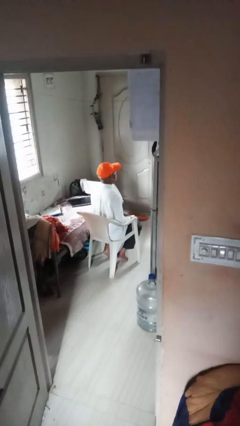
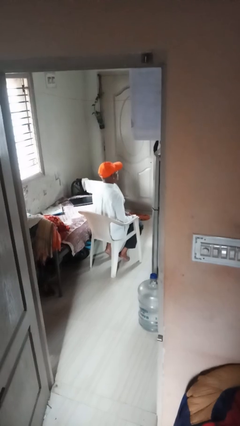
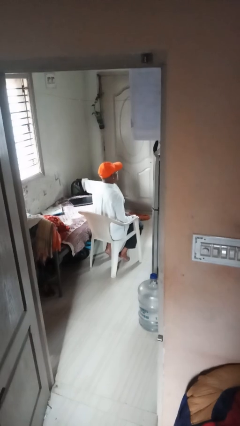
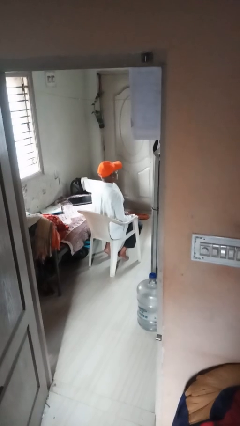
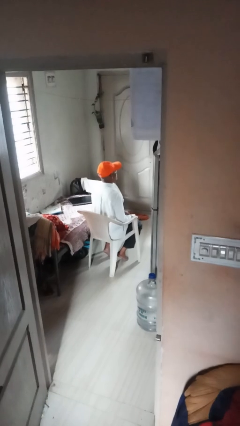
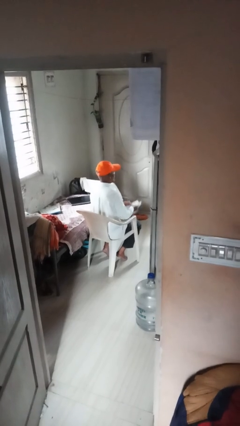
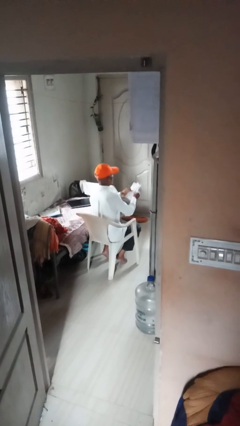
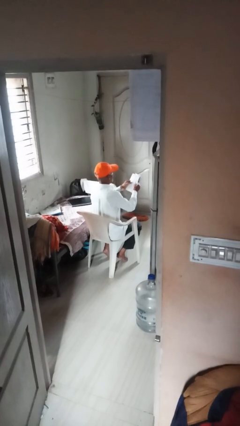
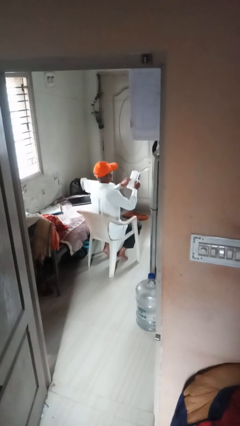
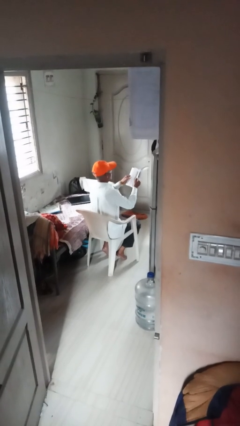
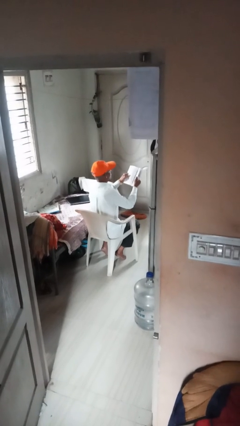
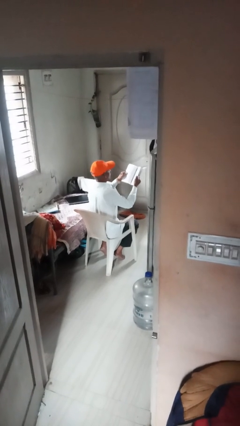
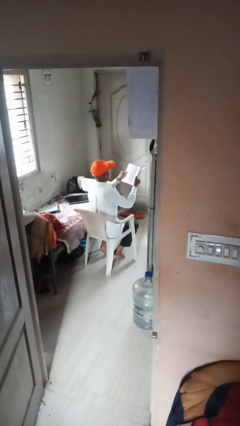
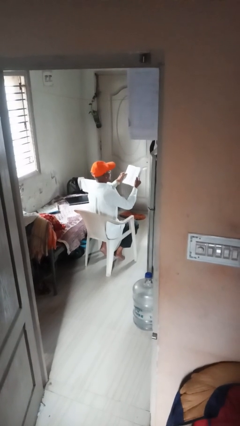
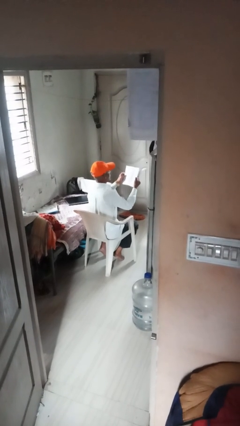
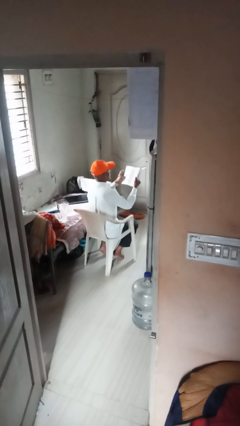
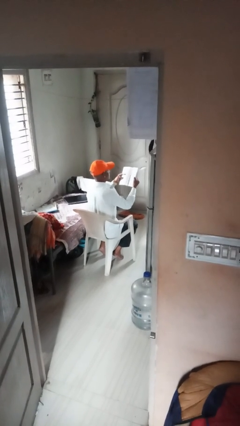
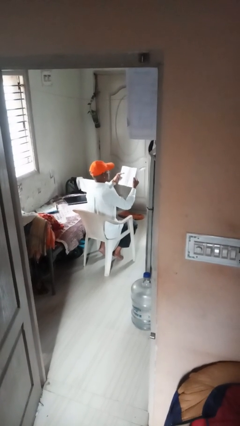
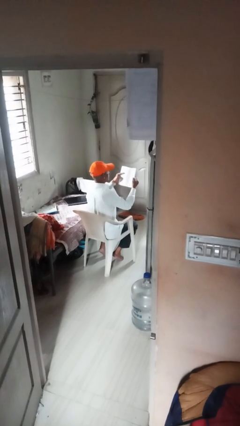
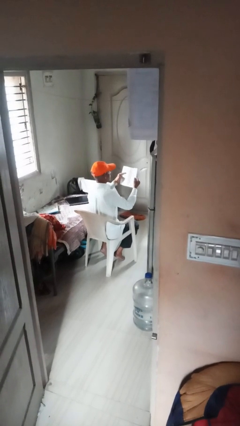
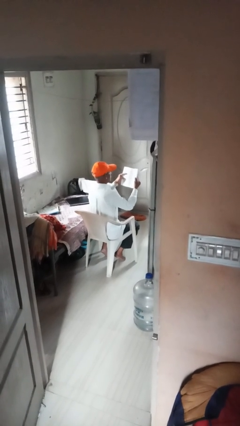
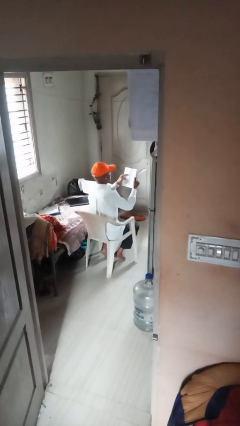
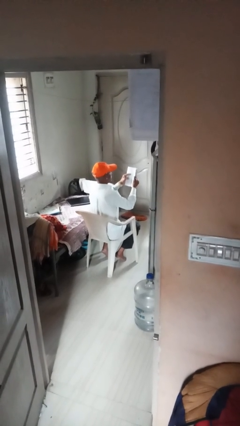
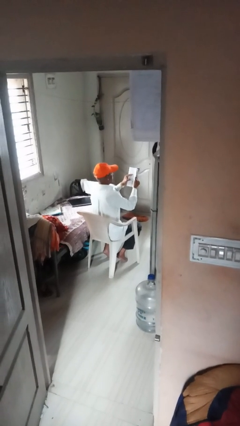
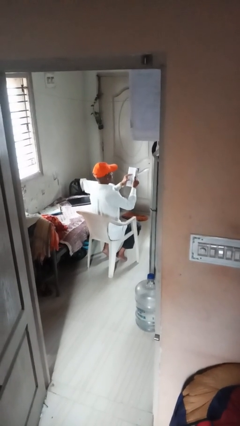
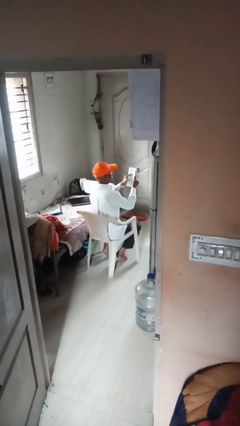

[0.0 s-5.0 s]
person reads book

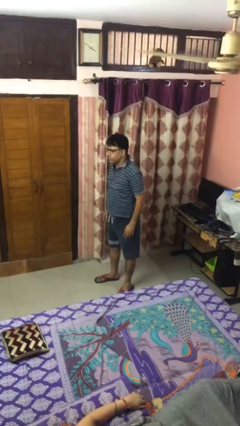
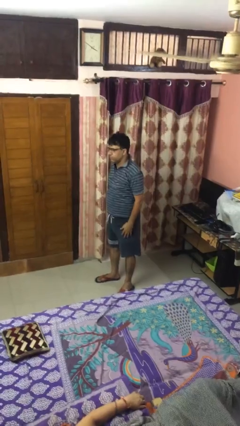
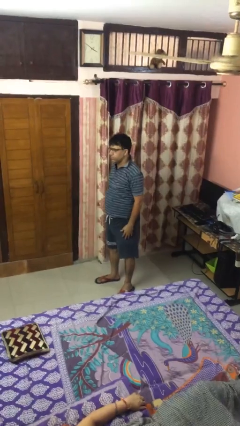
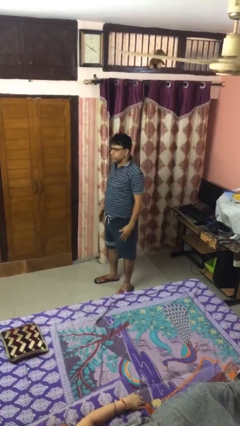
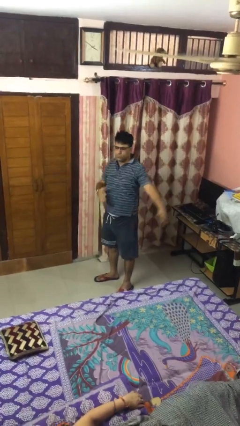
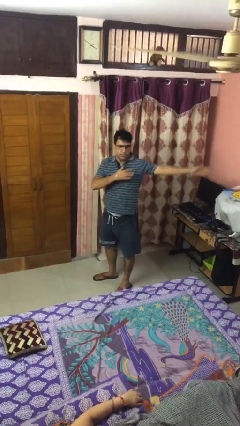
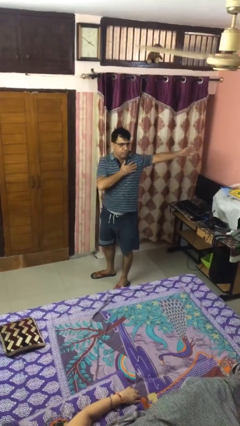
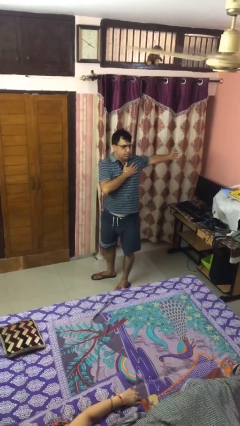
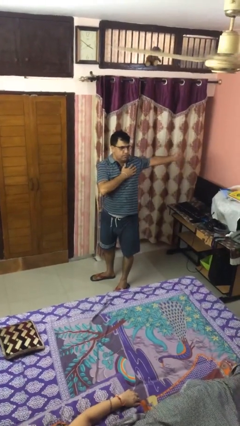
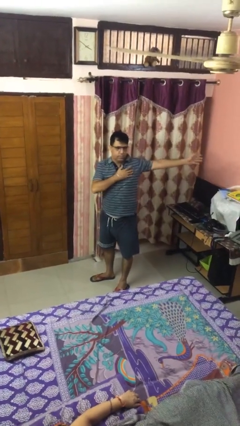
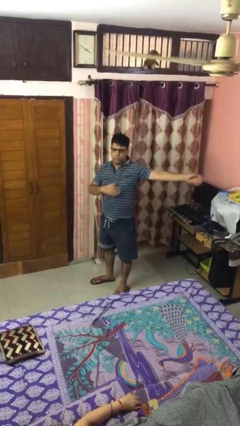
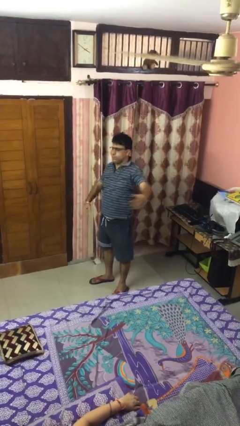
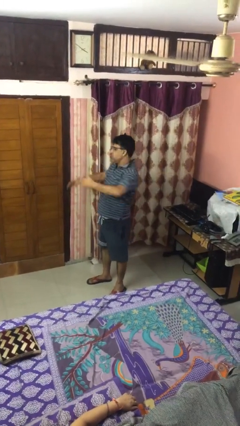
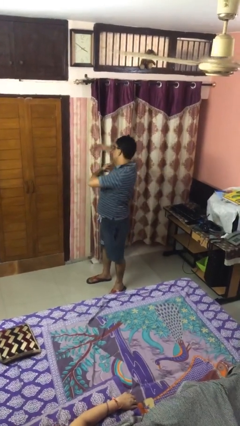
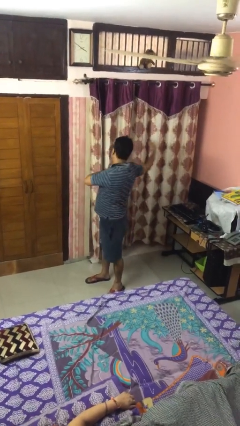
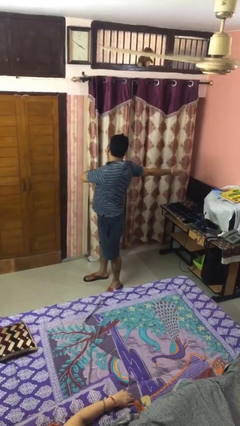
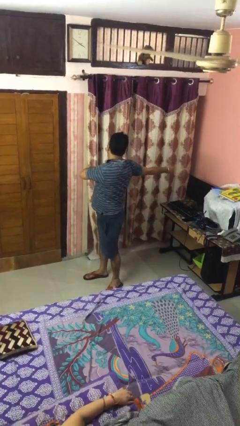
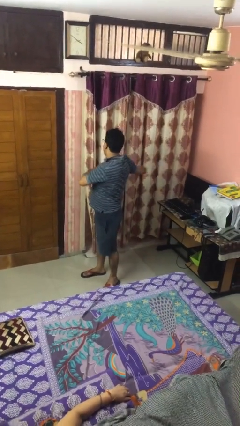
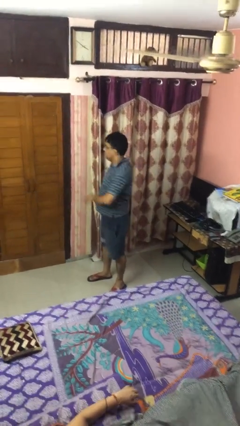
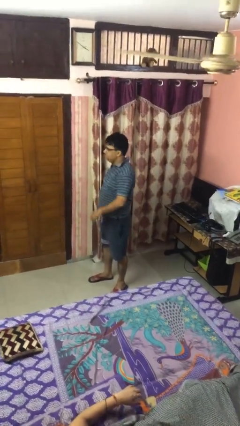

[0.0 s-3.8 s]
person stretches arms to side

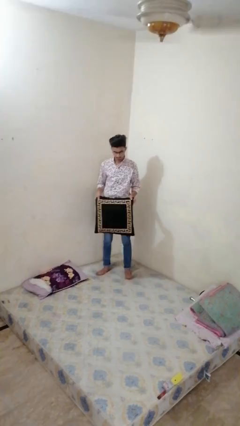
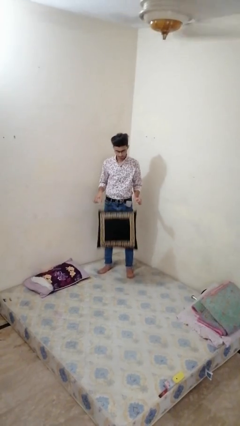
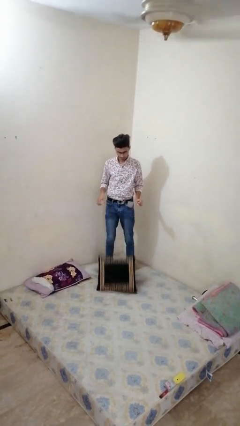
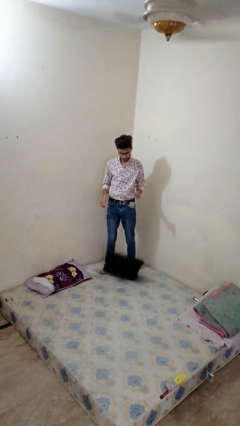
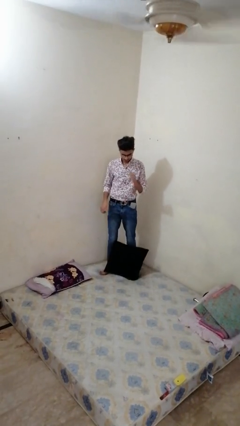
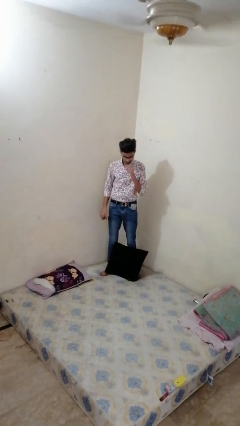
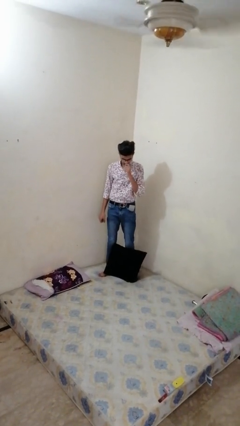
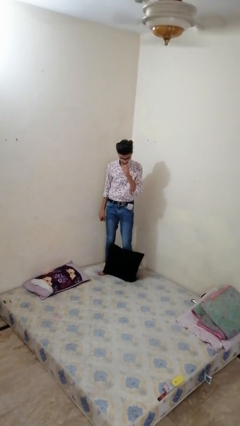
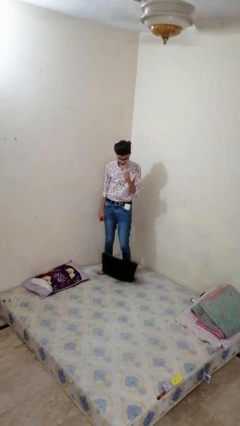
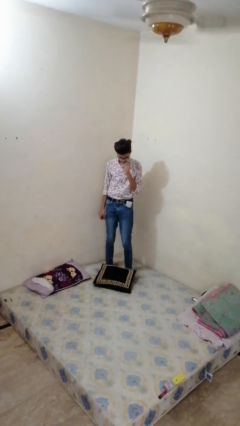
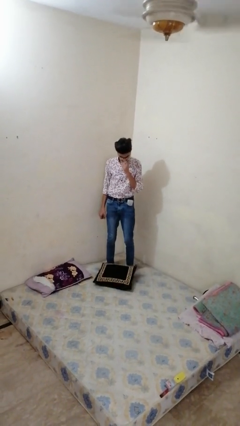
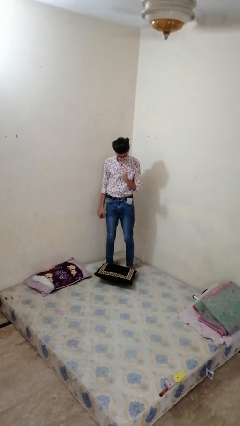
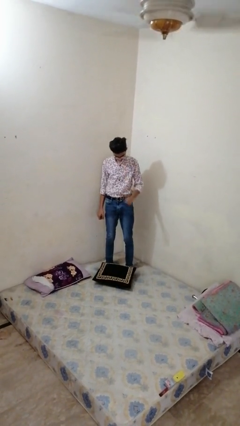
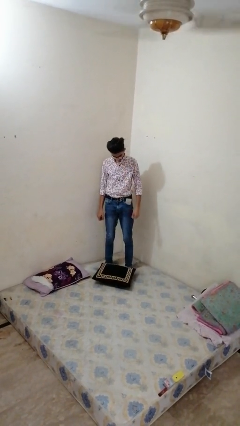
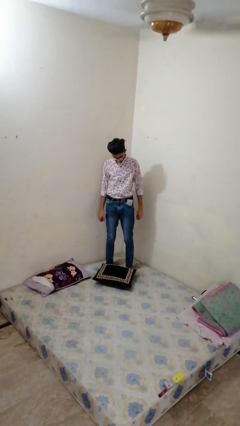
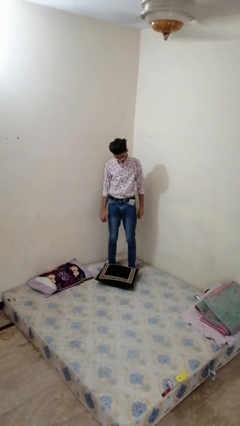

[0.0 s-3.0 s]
person throws object on bed

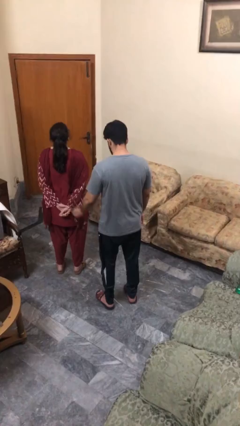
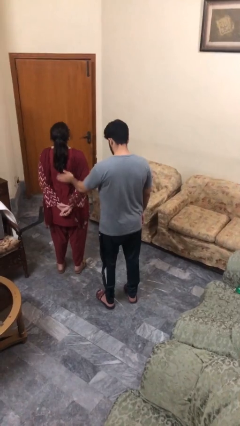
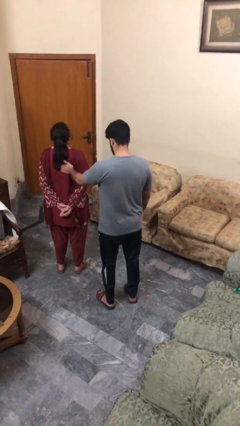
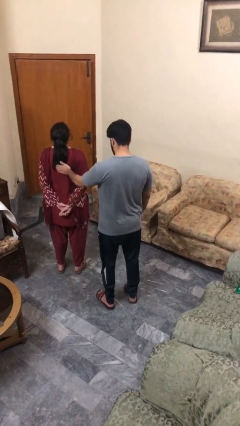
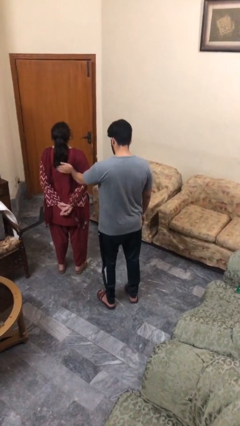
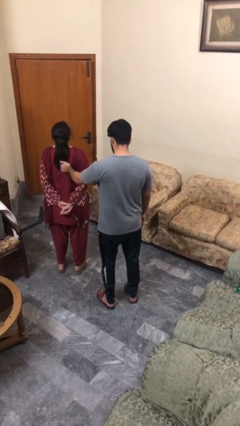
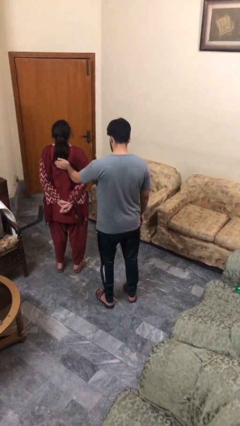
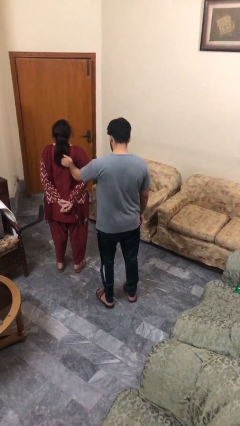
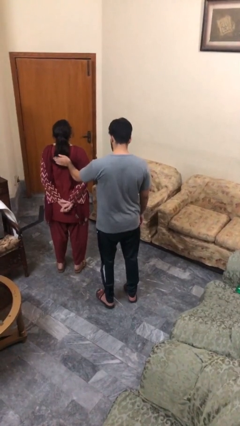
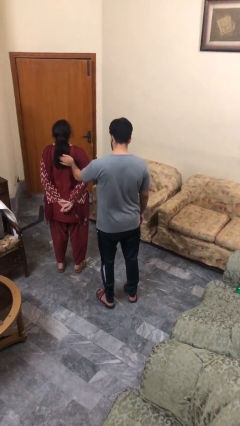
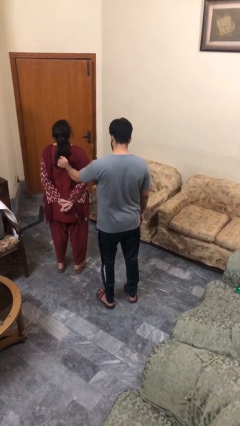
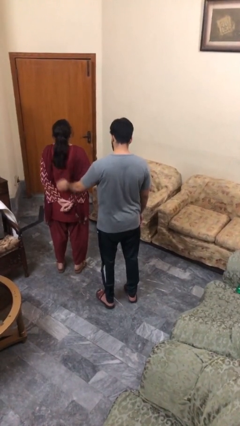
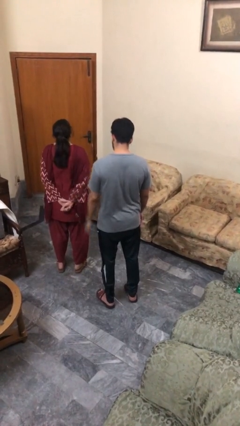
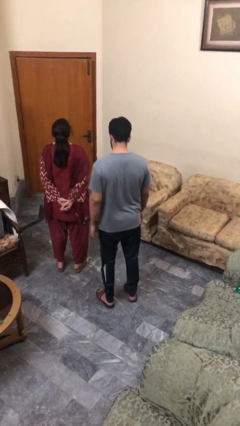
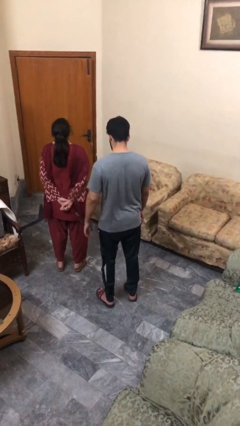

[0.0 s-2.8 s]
person touches back of person

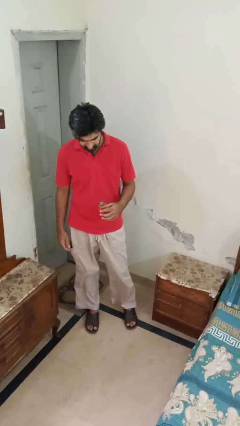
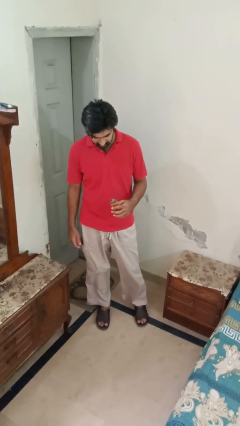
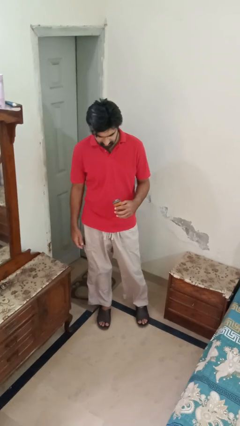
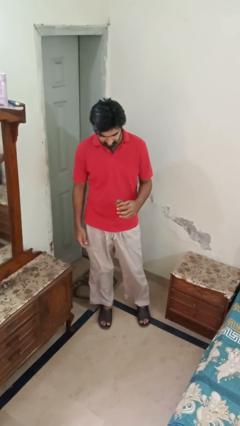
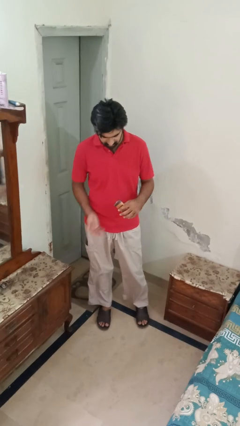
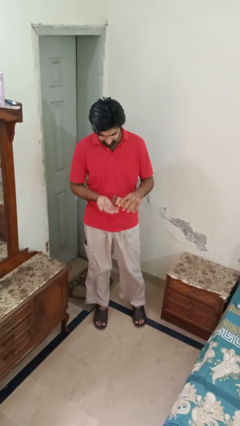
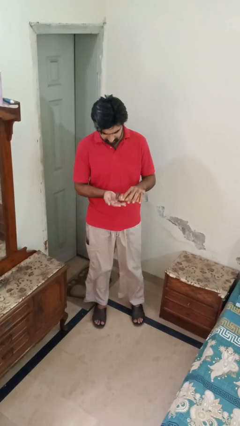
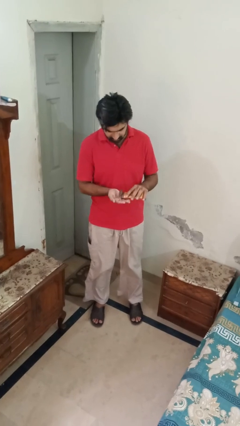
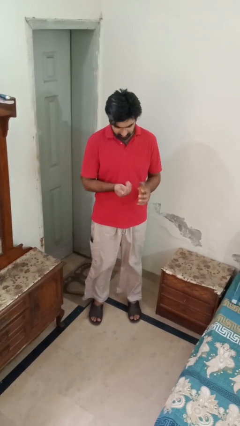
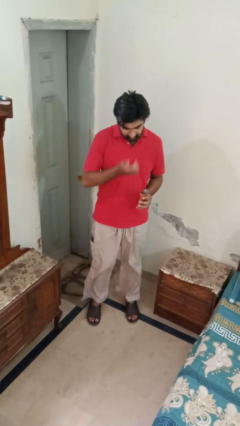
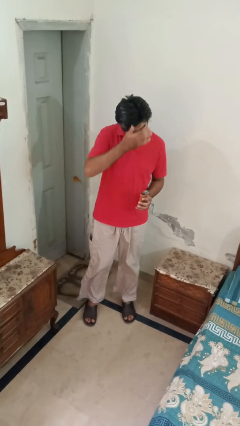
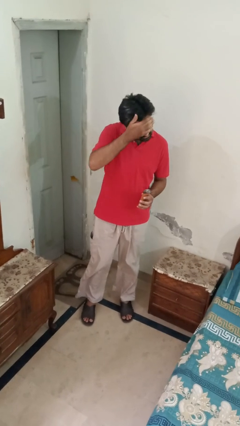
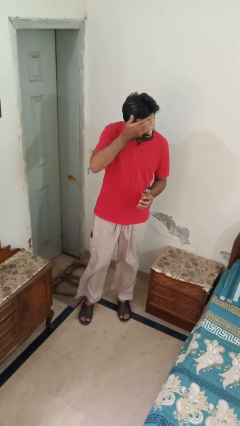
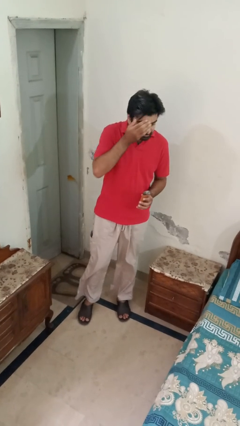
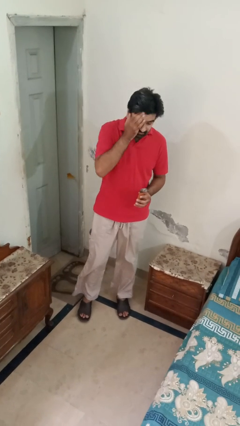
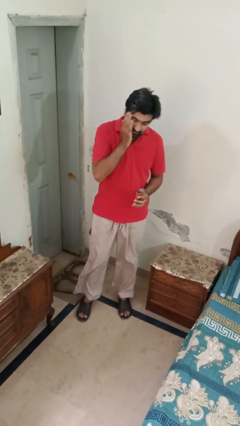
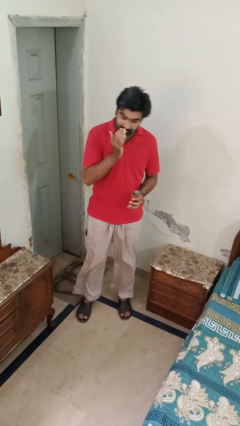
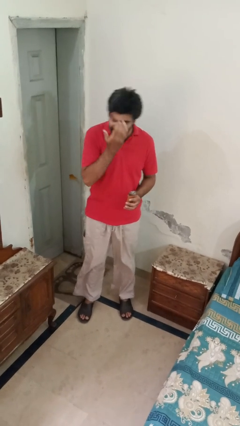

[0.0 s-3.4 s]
person applies sunscreen
